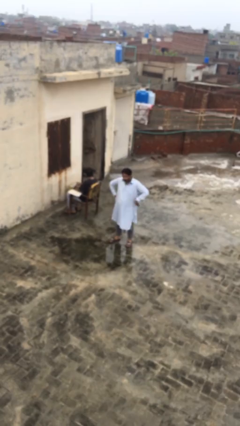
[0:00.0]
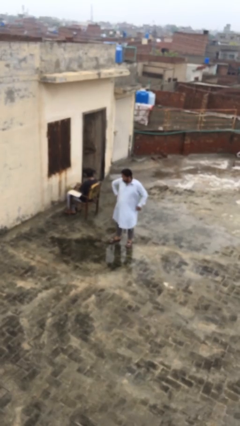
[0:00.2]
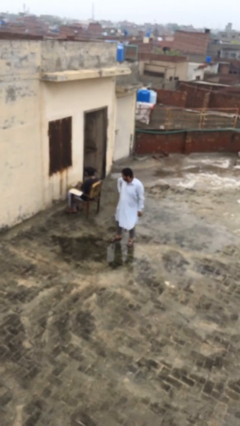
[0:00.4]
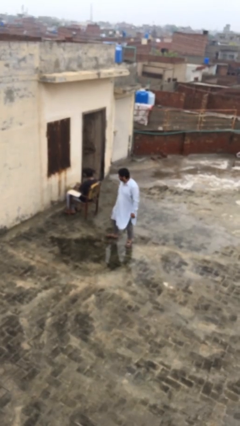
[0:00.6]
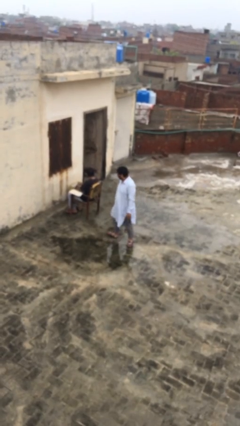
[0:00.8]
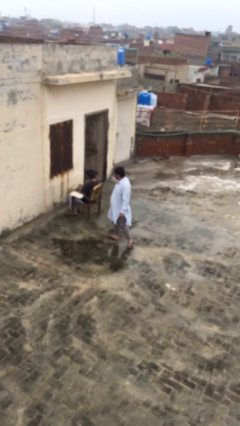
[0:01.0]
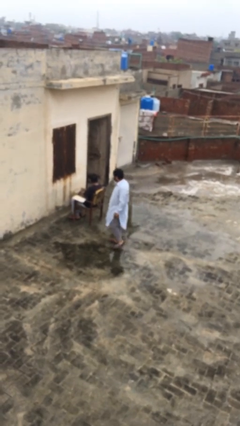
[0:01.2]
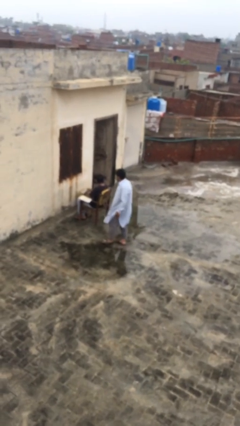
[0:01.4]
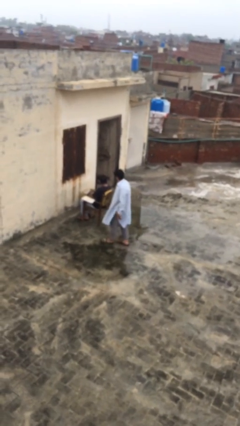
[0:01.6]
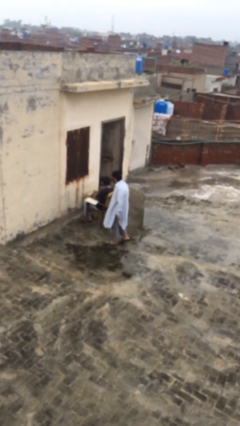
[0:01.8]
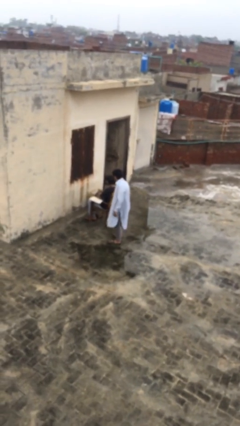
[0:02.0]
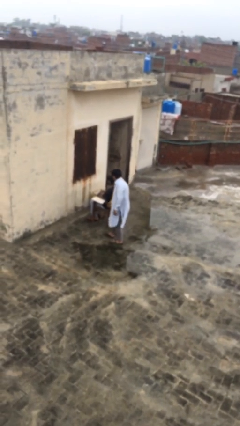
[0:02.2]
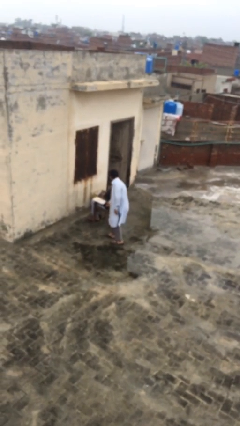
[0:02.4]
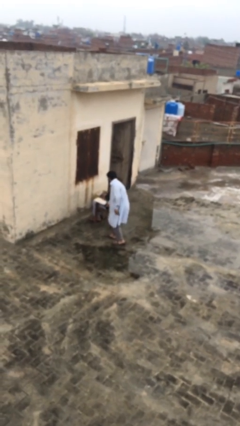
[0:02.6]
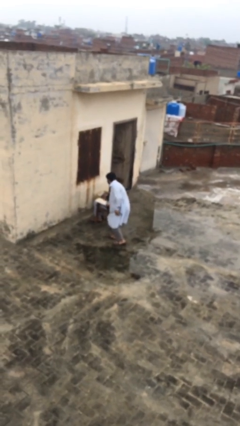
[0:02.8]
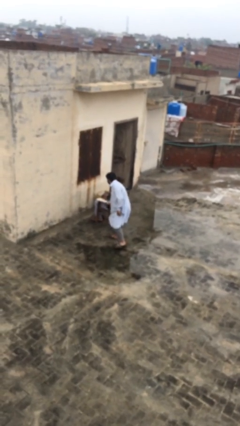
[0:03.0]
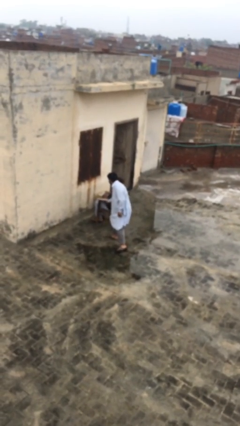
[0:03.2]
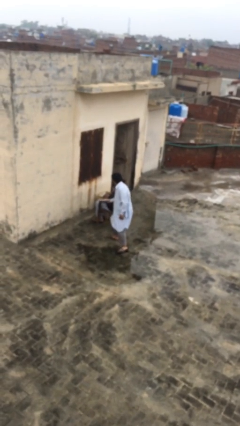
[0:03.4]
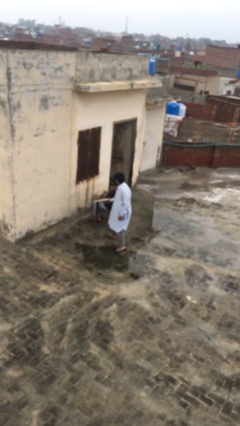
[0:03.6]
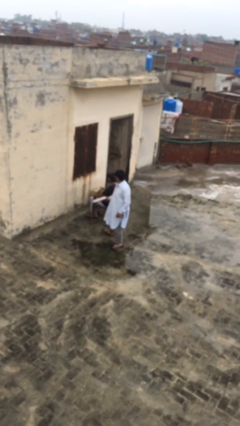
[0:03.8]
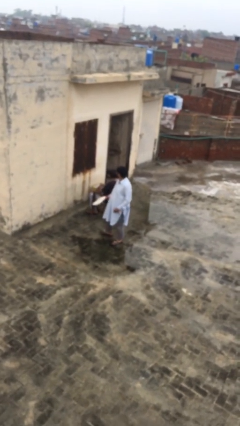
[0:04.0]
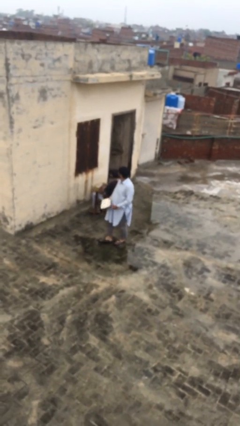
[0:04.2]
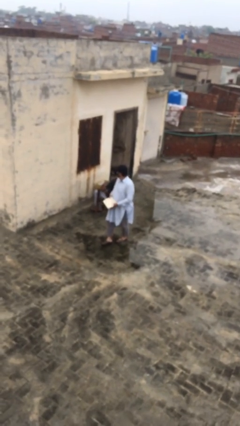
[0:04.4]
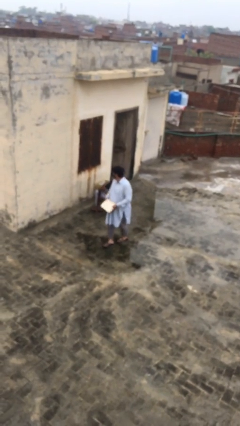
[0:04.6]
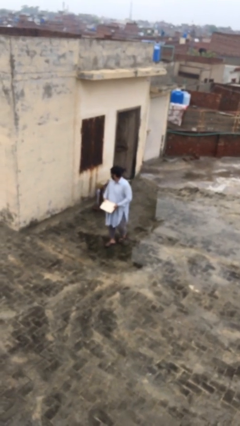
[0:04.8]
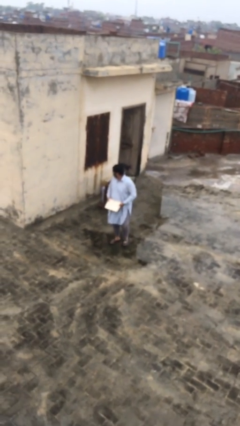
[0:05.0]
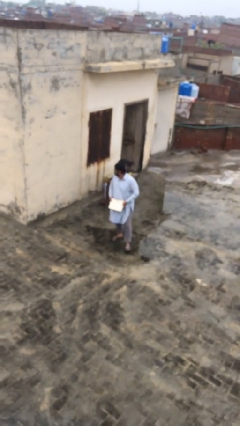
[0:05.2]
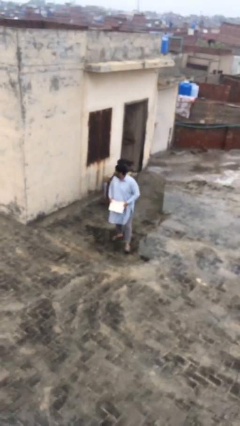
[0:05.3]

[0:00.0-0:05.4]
person steals object from person

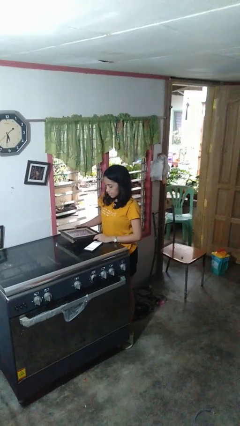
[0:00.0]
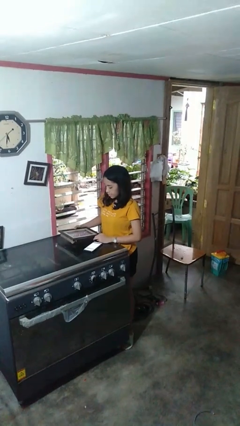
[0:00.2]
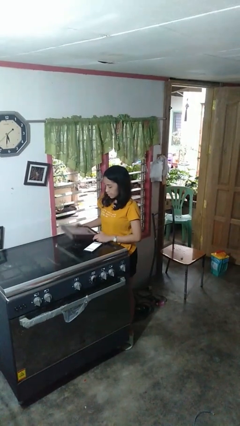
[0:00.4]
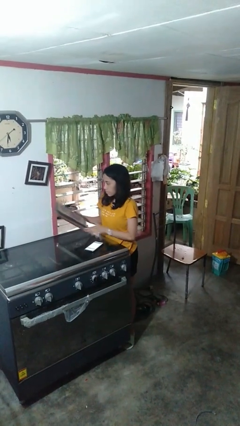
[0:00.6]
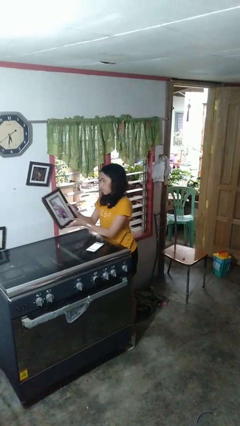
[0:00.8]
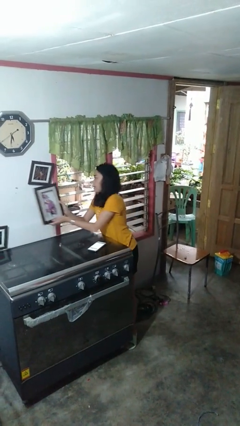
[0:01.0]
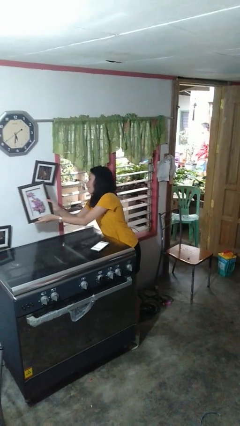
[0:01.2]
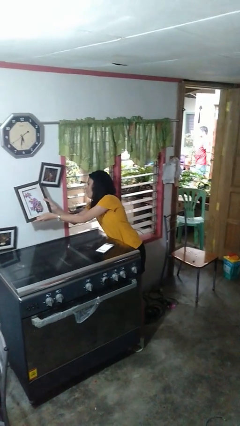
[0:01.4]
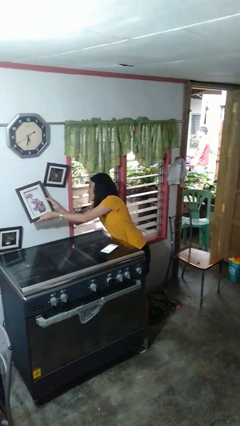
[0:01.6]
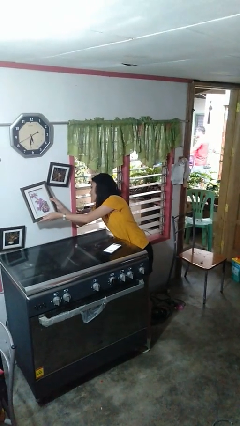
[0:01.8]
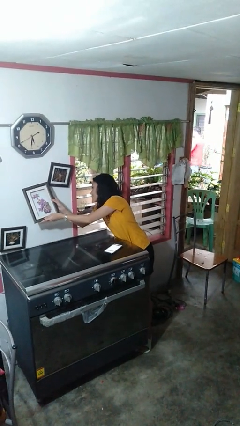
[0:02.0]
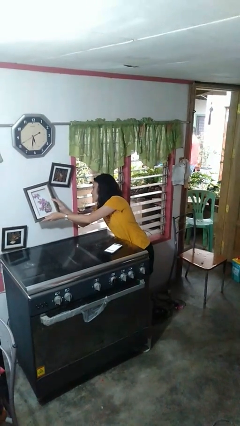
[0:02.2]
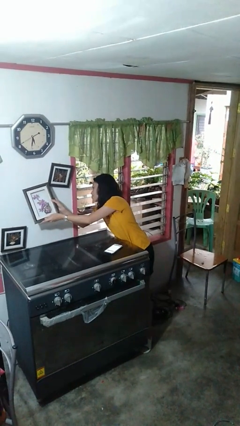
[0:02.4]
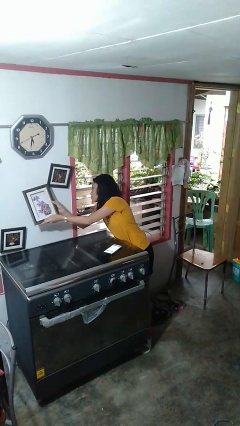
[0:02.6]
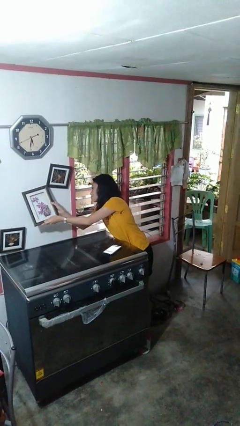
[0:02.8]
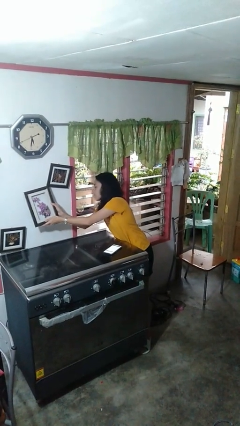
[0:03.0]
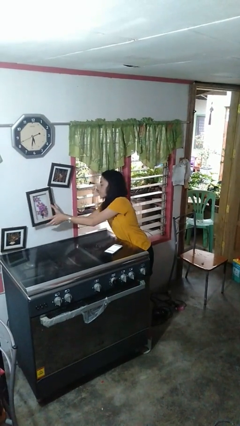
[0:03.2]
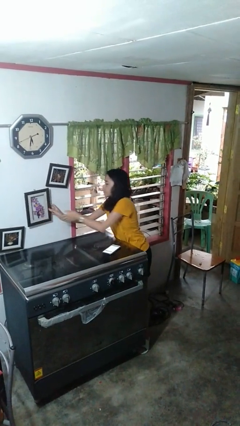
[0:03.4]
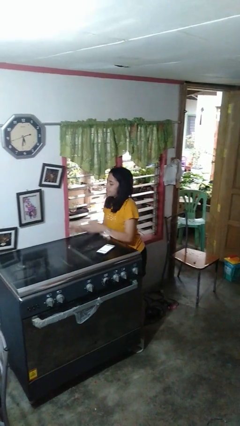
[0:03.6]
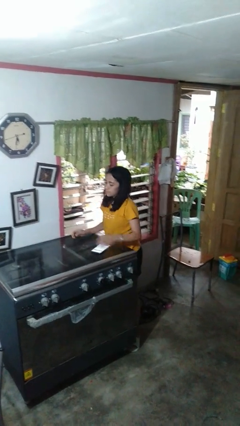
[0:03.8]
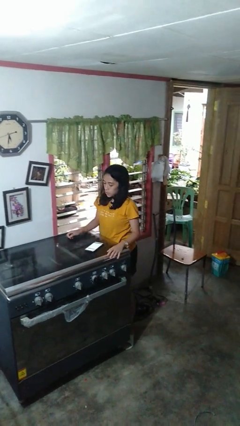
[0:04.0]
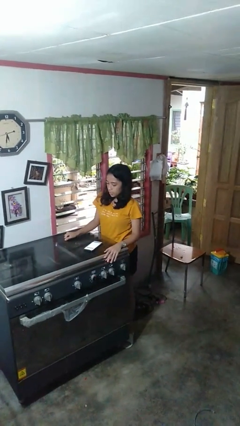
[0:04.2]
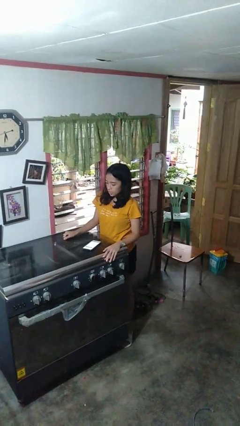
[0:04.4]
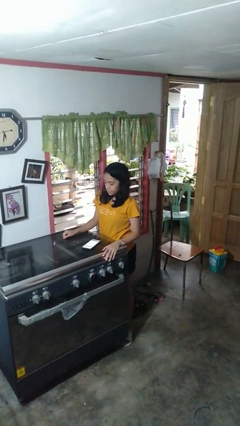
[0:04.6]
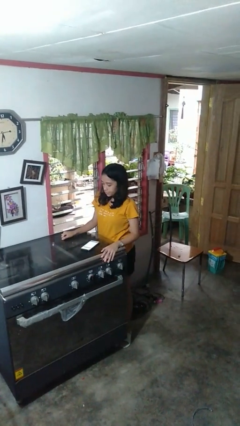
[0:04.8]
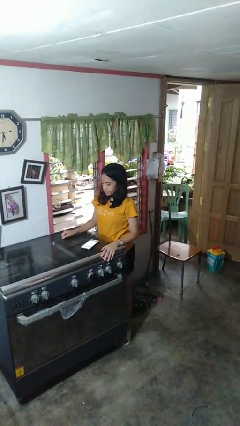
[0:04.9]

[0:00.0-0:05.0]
person puts up picture frame

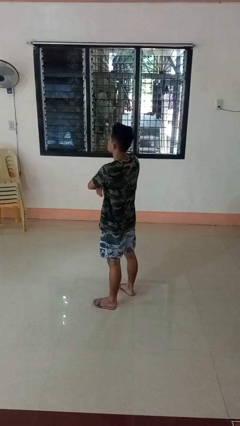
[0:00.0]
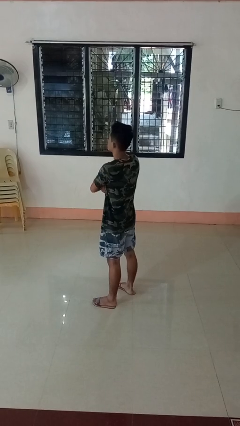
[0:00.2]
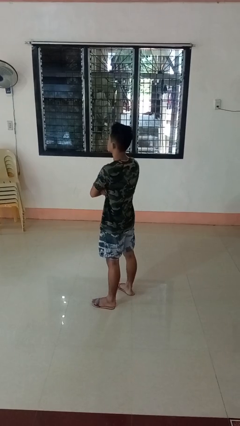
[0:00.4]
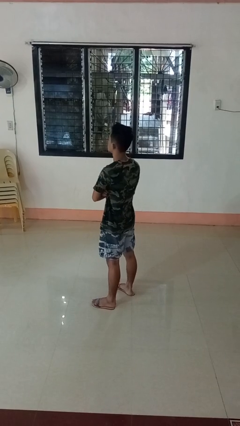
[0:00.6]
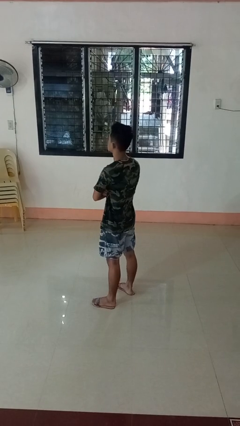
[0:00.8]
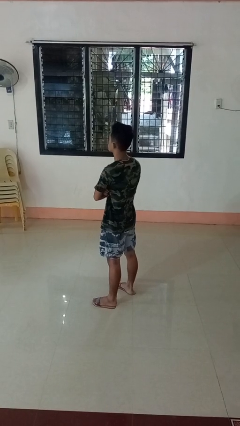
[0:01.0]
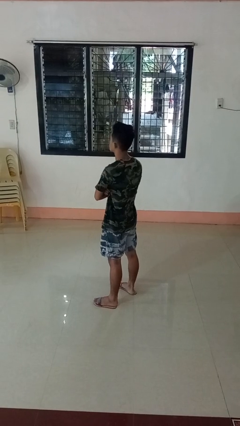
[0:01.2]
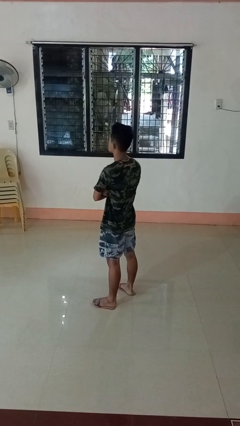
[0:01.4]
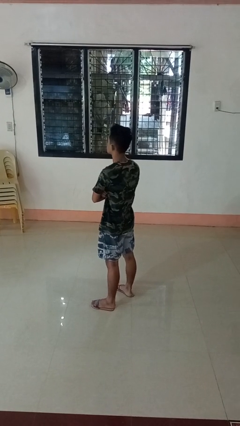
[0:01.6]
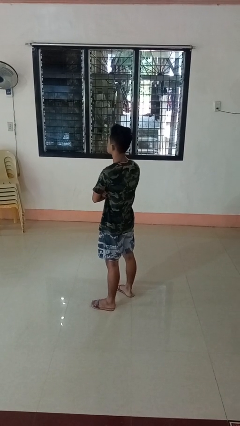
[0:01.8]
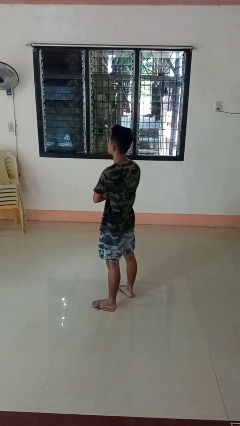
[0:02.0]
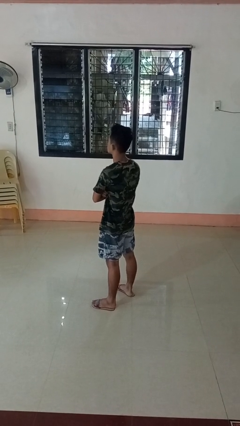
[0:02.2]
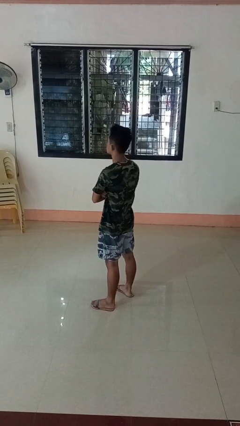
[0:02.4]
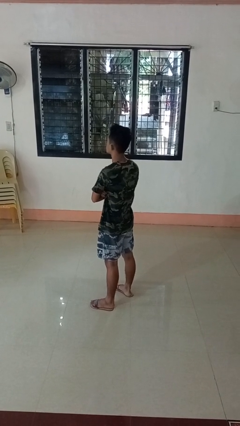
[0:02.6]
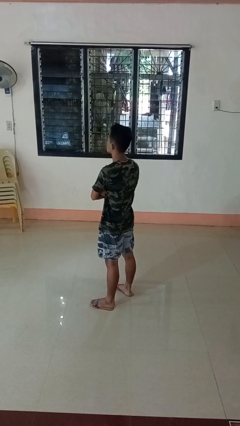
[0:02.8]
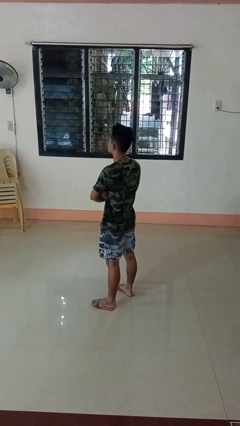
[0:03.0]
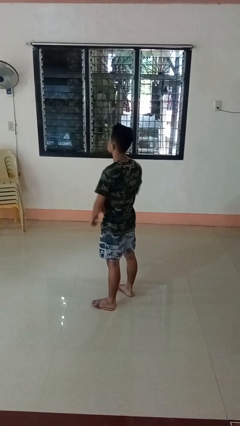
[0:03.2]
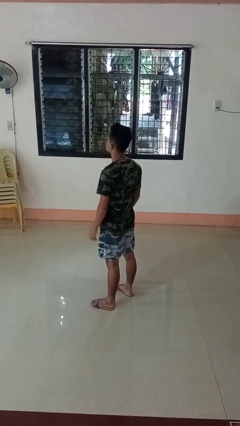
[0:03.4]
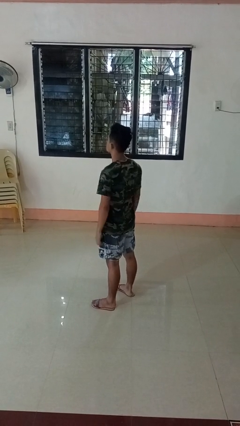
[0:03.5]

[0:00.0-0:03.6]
person crosses arms

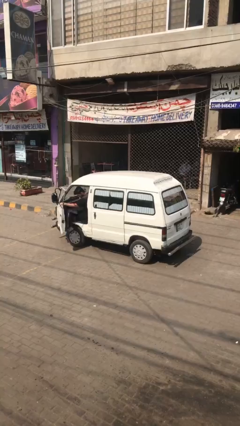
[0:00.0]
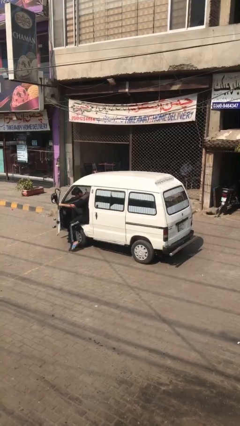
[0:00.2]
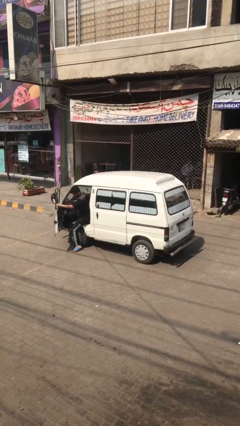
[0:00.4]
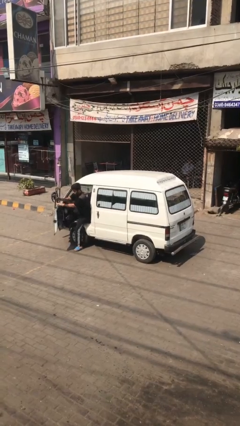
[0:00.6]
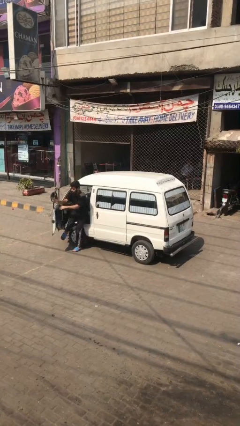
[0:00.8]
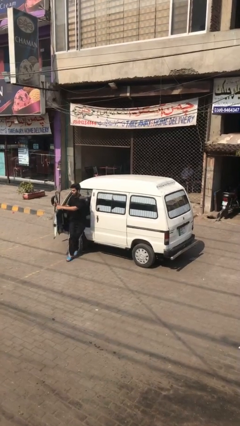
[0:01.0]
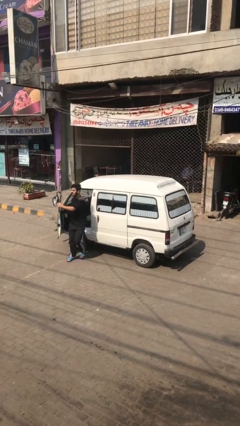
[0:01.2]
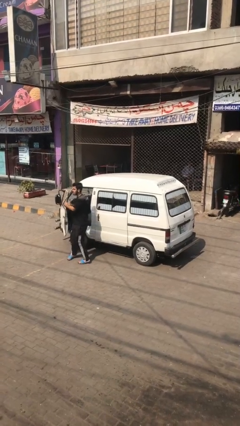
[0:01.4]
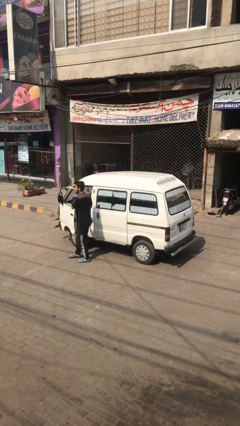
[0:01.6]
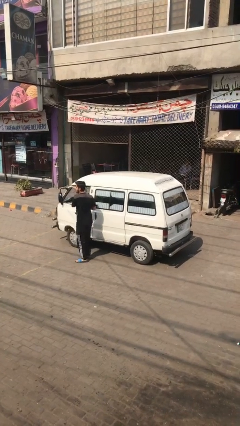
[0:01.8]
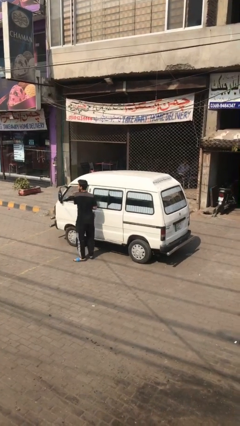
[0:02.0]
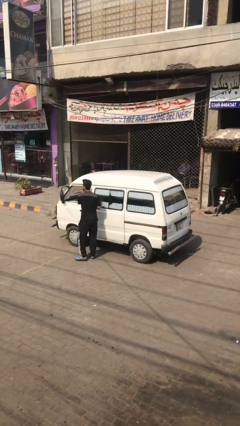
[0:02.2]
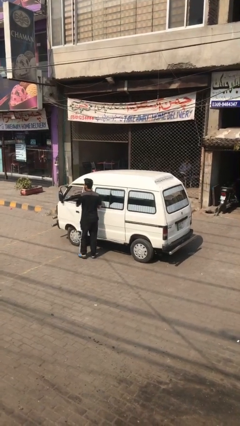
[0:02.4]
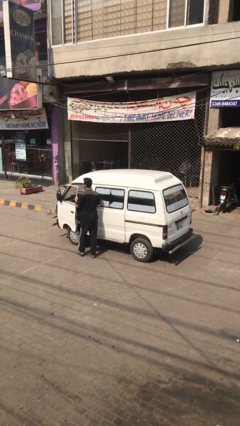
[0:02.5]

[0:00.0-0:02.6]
car drops off person

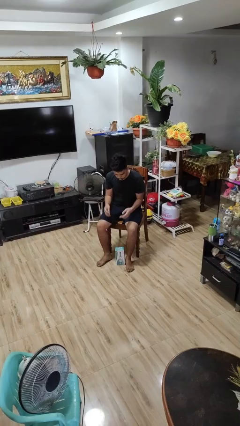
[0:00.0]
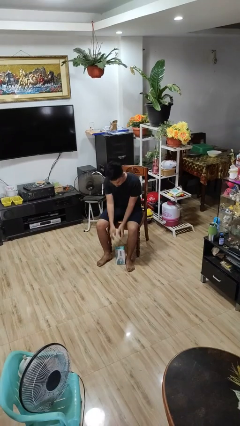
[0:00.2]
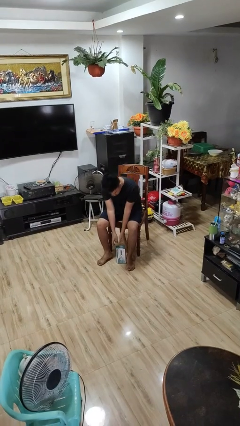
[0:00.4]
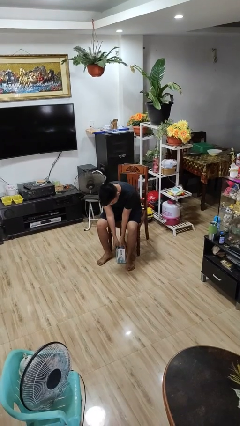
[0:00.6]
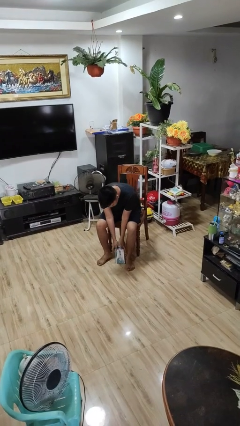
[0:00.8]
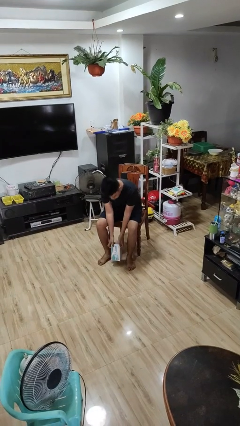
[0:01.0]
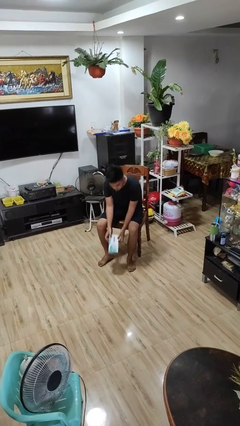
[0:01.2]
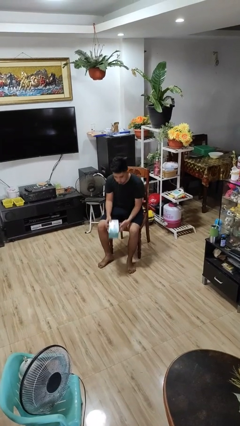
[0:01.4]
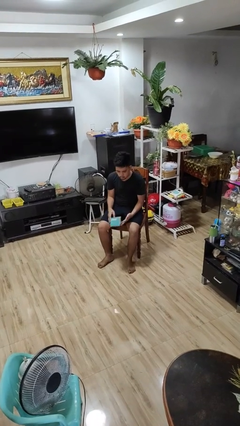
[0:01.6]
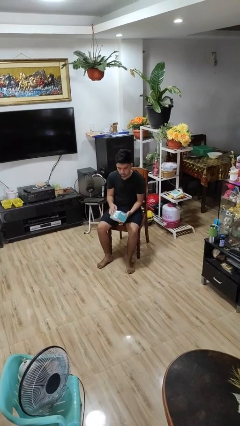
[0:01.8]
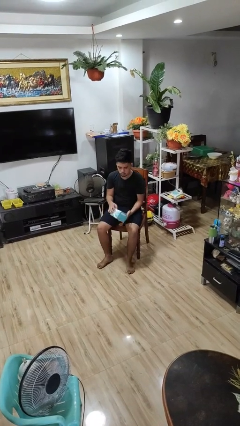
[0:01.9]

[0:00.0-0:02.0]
person picks up object from floor
